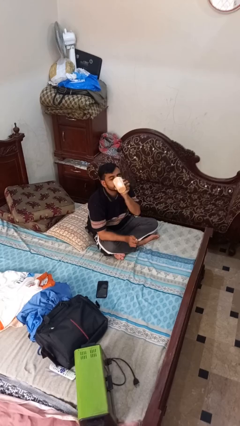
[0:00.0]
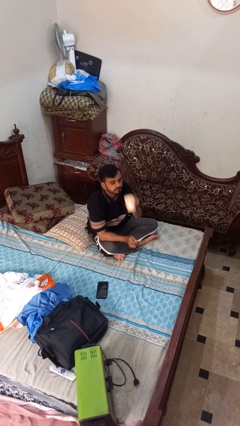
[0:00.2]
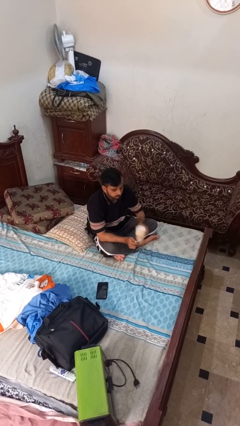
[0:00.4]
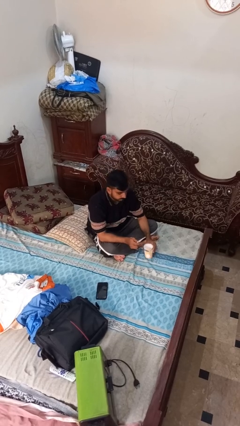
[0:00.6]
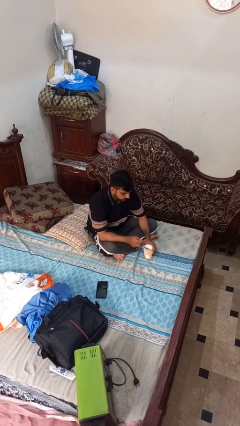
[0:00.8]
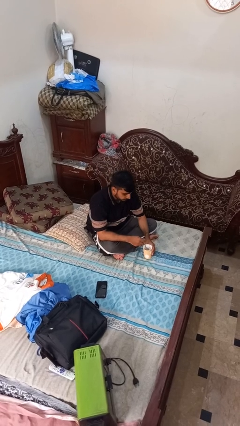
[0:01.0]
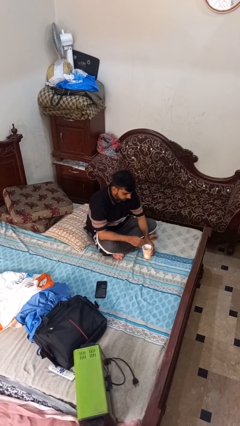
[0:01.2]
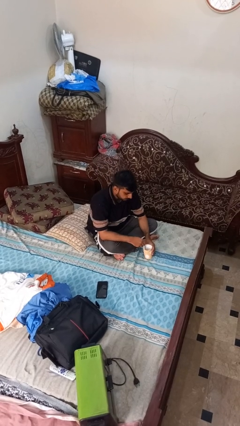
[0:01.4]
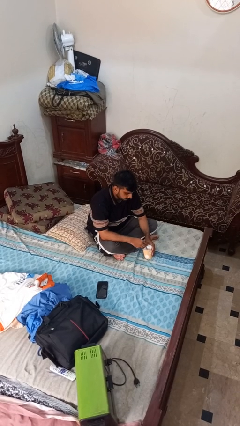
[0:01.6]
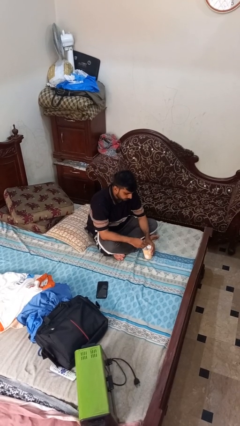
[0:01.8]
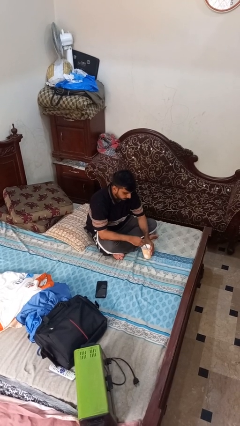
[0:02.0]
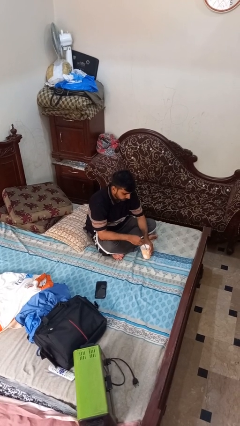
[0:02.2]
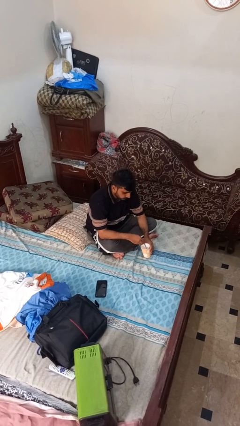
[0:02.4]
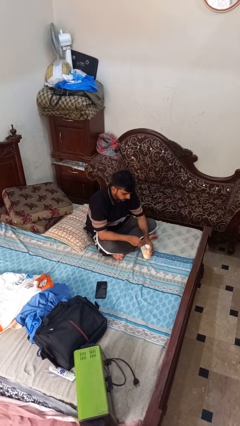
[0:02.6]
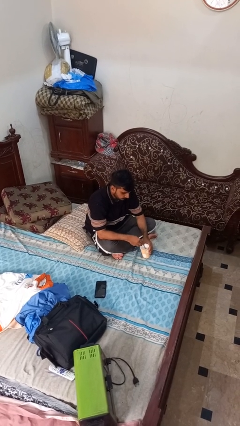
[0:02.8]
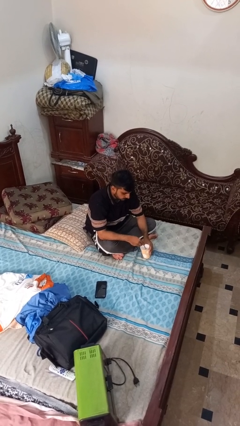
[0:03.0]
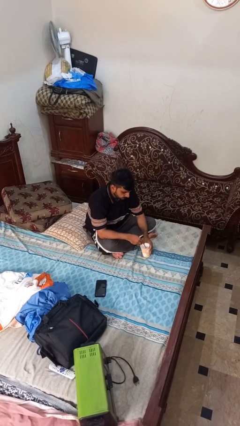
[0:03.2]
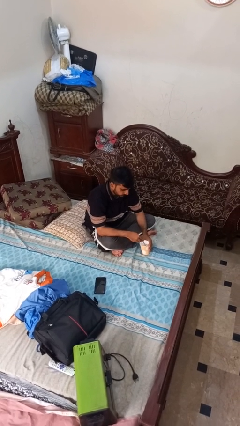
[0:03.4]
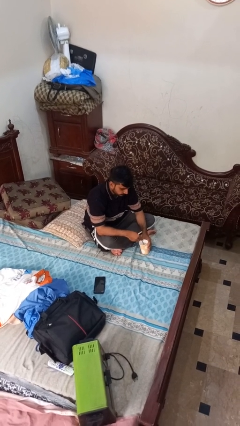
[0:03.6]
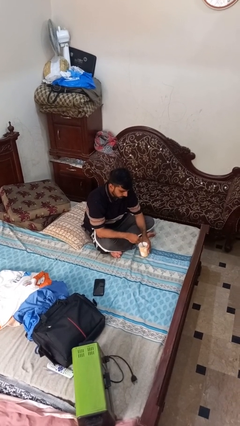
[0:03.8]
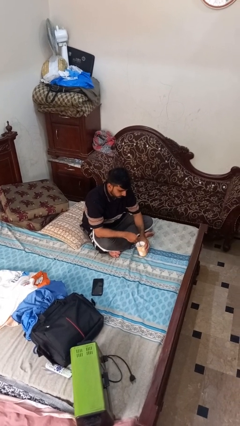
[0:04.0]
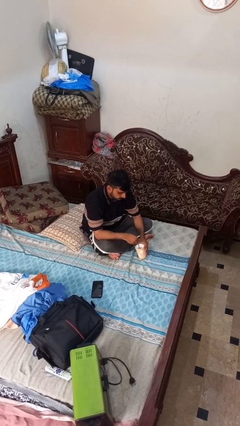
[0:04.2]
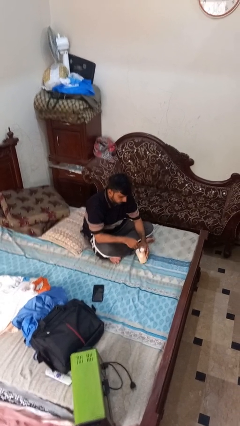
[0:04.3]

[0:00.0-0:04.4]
person stirs mug

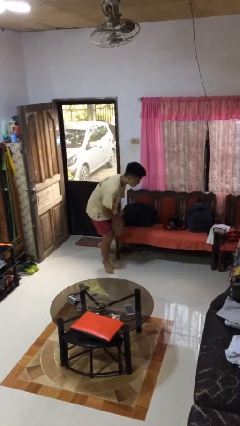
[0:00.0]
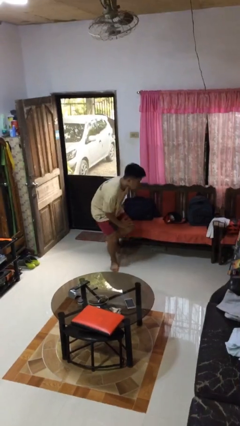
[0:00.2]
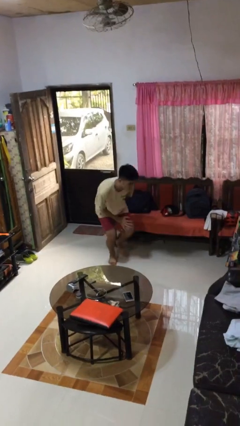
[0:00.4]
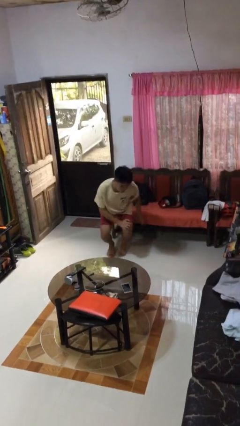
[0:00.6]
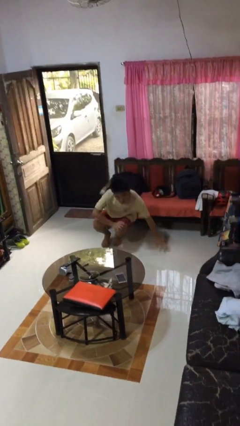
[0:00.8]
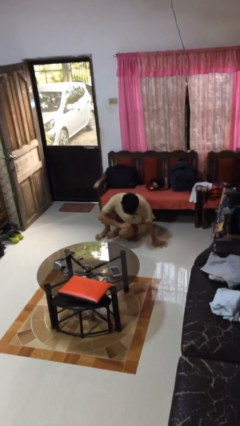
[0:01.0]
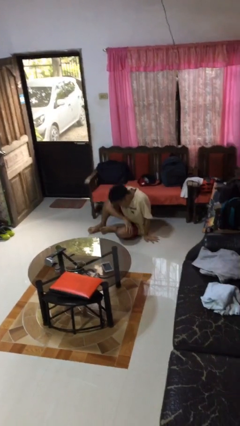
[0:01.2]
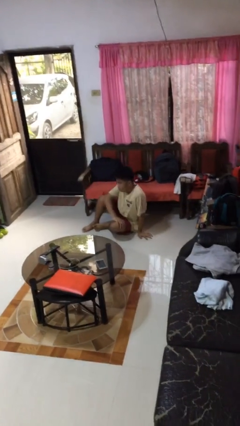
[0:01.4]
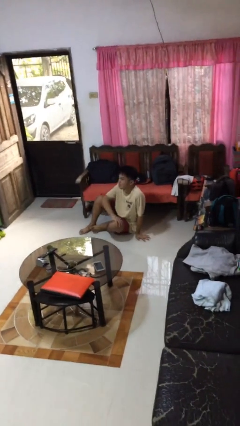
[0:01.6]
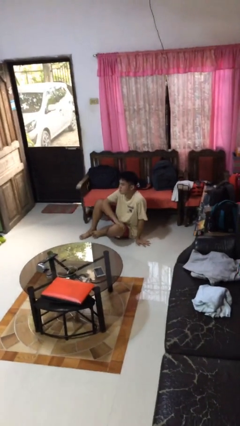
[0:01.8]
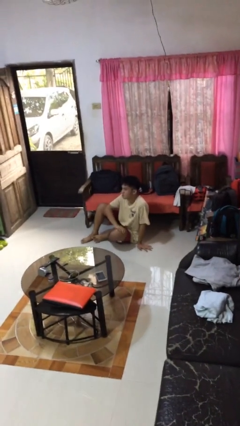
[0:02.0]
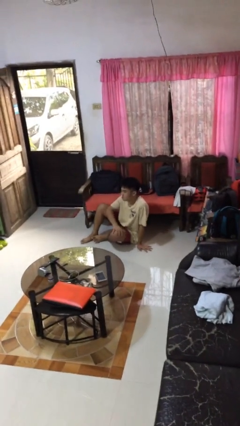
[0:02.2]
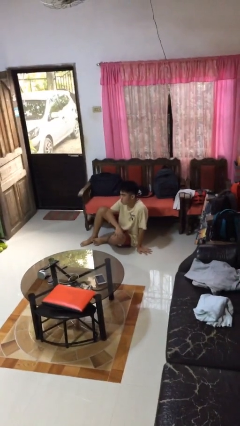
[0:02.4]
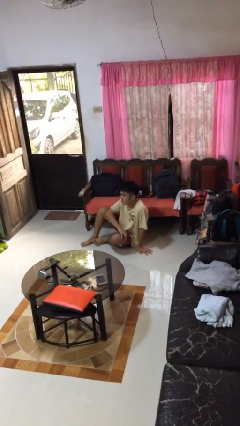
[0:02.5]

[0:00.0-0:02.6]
person lies down on floor

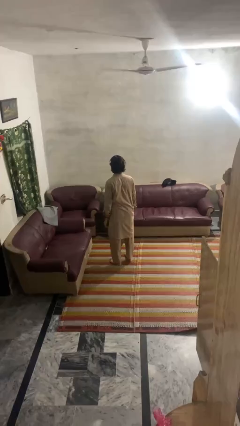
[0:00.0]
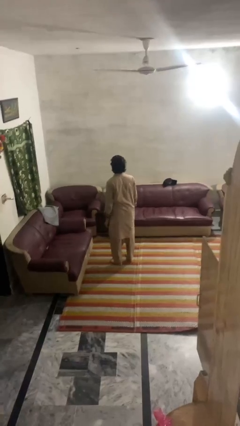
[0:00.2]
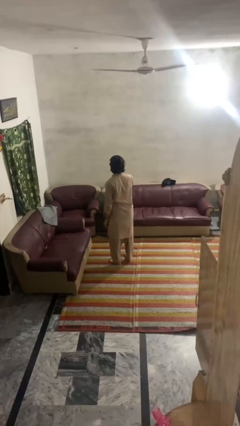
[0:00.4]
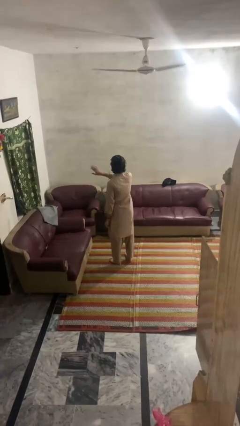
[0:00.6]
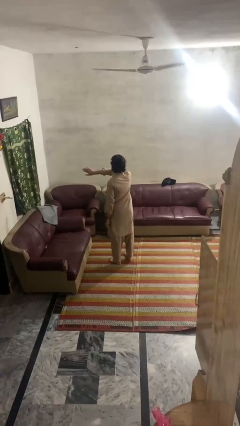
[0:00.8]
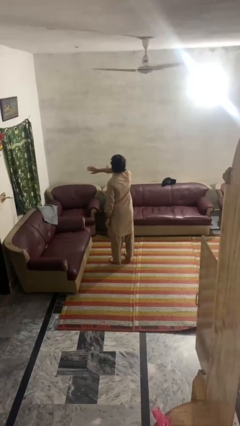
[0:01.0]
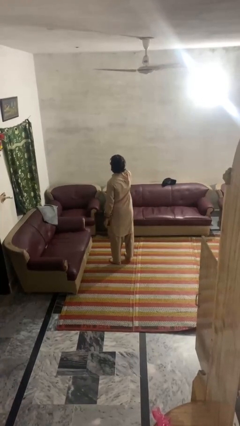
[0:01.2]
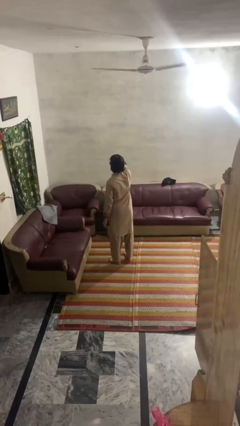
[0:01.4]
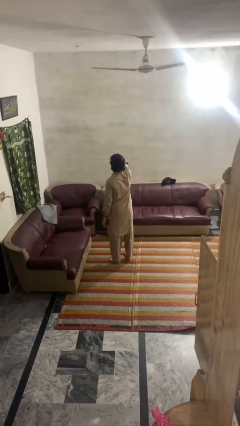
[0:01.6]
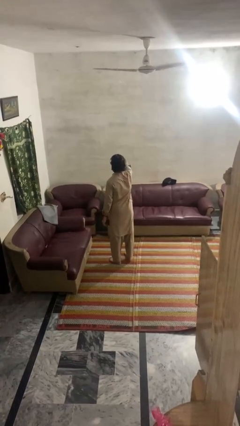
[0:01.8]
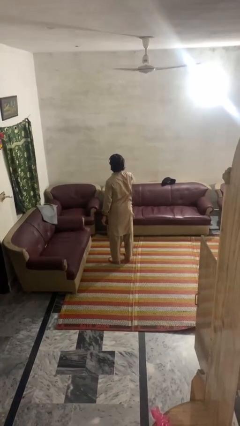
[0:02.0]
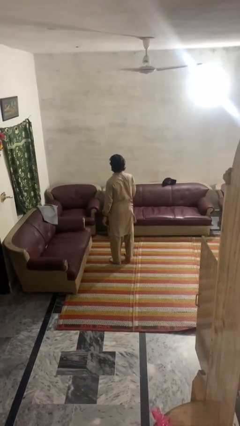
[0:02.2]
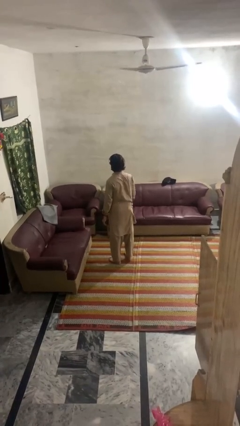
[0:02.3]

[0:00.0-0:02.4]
person gestures swipe right

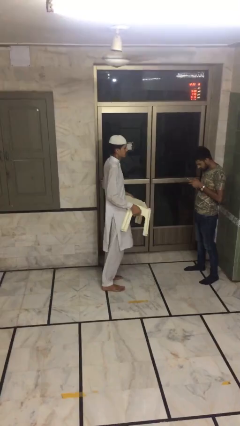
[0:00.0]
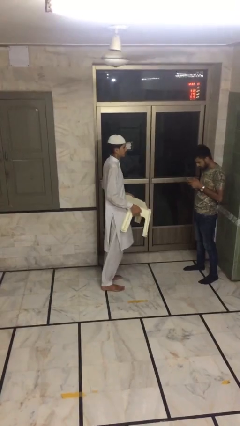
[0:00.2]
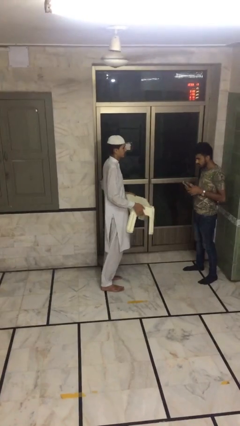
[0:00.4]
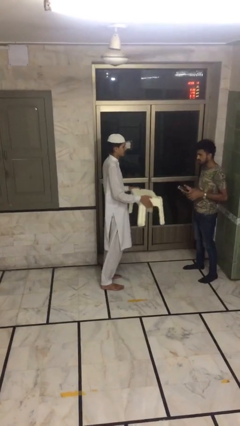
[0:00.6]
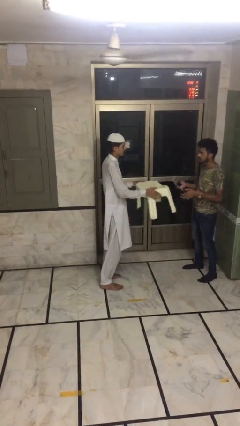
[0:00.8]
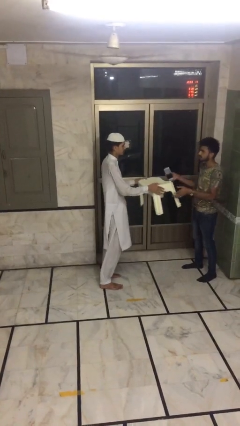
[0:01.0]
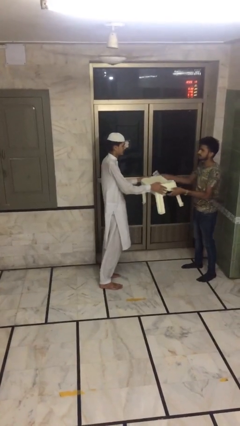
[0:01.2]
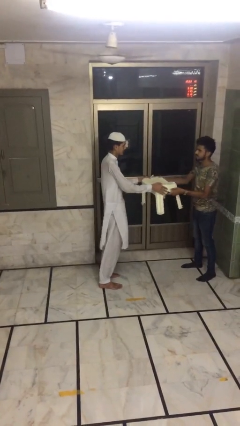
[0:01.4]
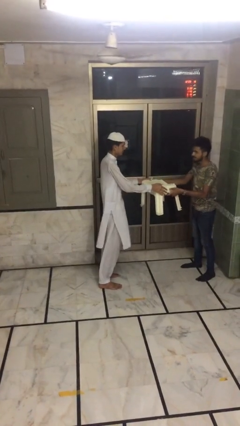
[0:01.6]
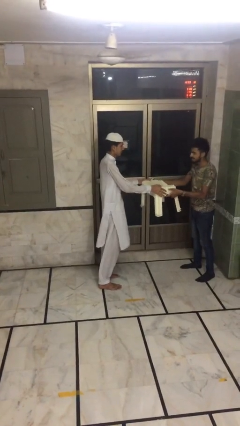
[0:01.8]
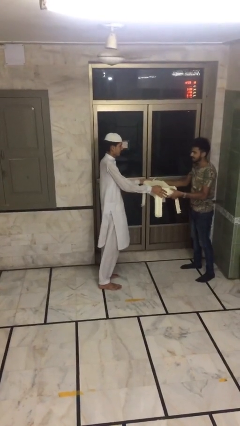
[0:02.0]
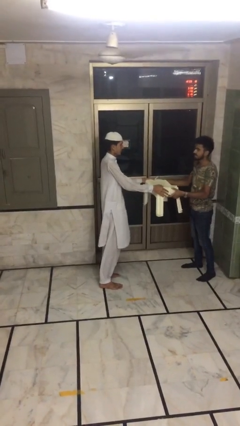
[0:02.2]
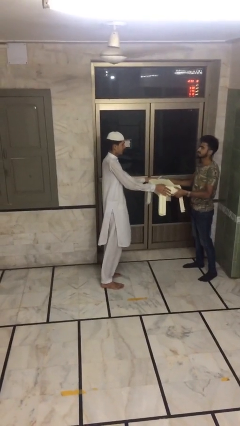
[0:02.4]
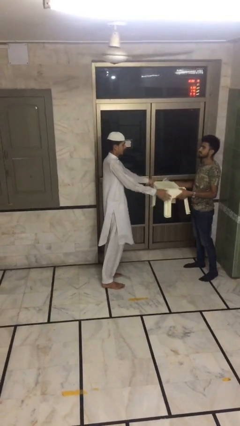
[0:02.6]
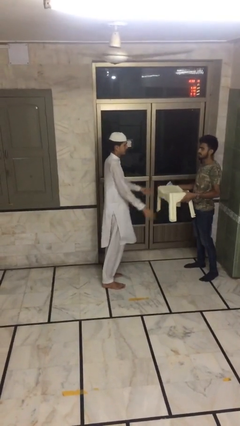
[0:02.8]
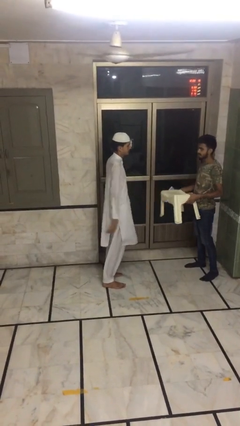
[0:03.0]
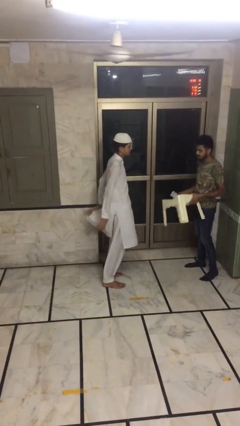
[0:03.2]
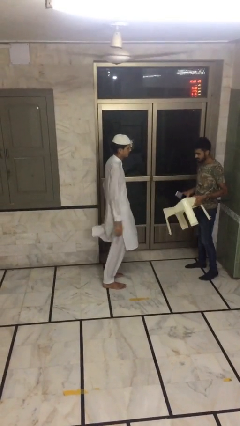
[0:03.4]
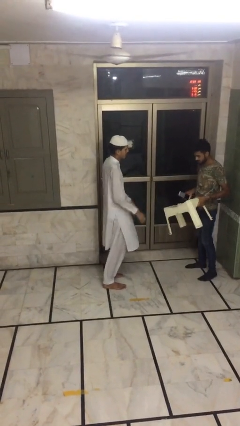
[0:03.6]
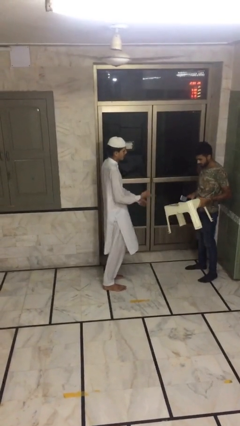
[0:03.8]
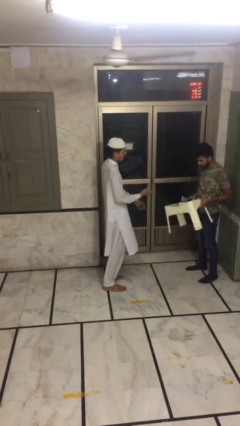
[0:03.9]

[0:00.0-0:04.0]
person transfers object to person

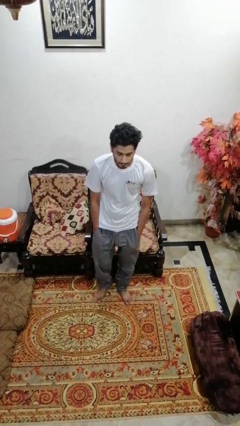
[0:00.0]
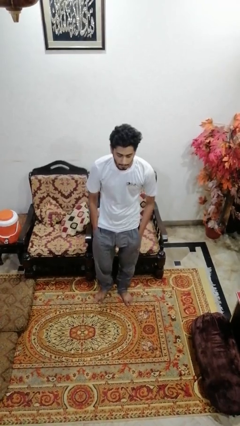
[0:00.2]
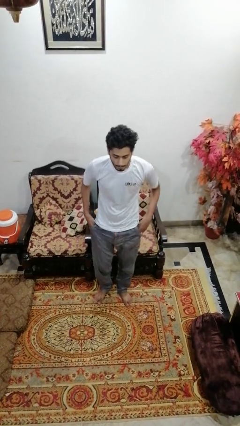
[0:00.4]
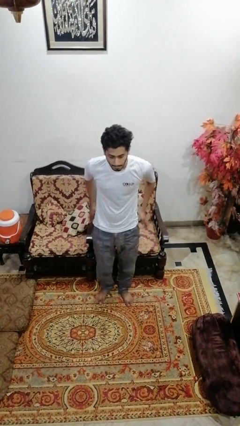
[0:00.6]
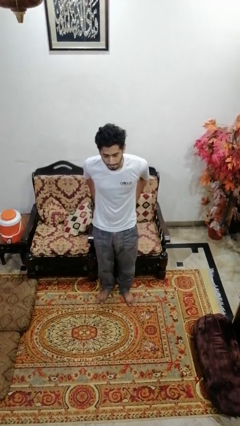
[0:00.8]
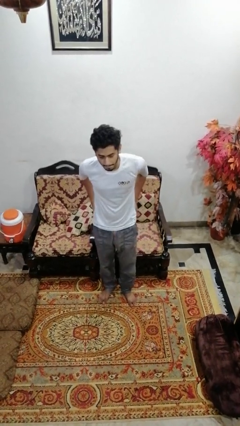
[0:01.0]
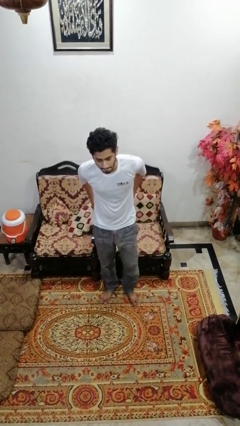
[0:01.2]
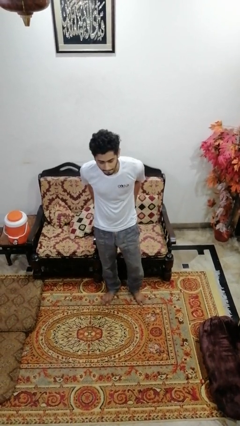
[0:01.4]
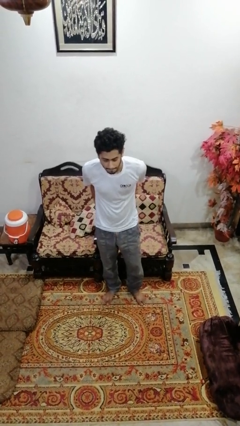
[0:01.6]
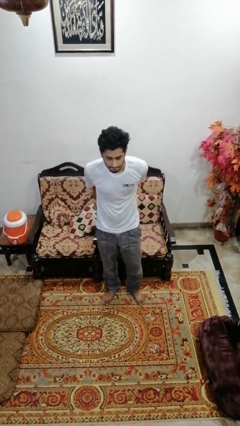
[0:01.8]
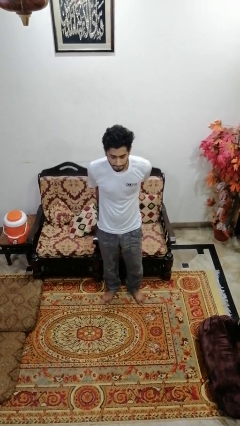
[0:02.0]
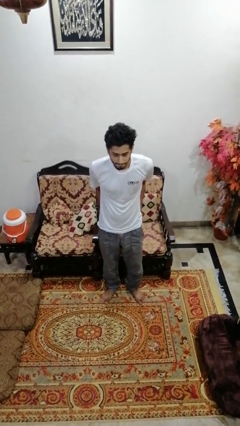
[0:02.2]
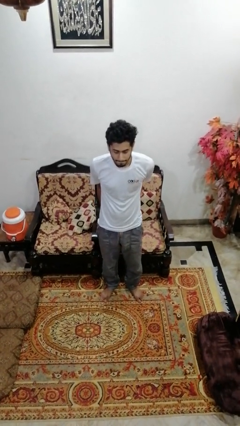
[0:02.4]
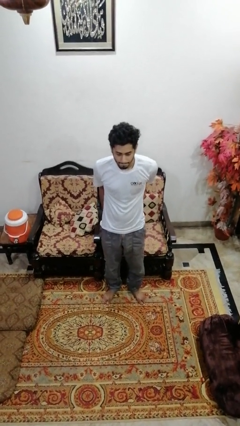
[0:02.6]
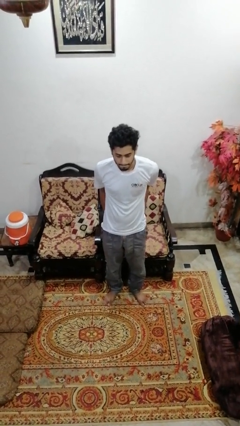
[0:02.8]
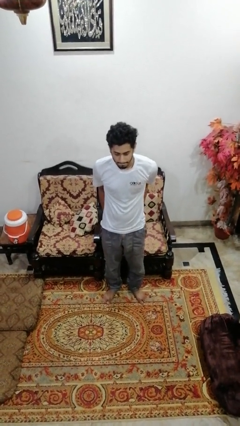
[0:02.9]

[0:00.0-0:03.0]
person puts hands in back pockets

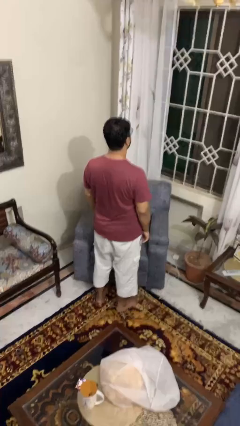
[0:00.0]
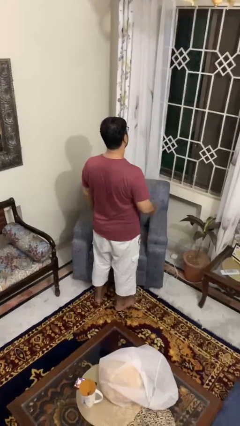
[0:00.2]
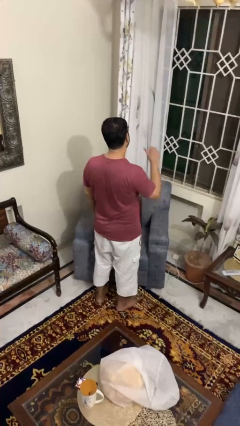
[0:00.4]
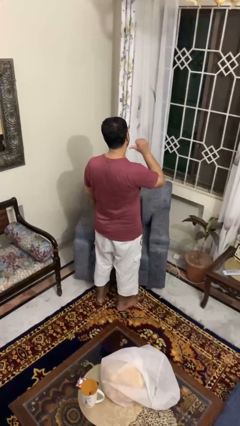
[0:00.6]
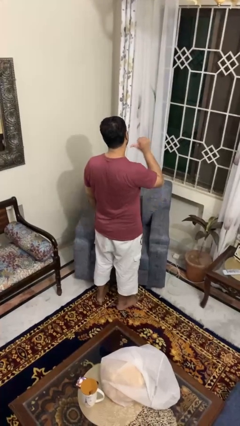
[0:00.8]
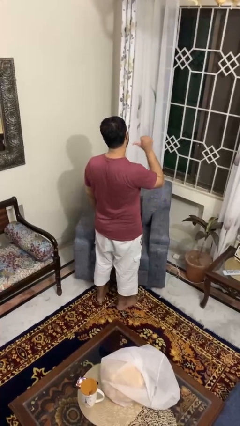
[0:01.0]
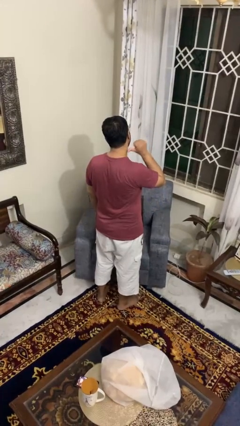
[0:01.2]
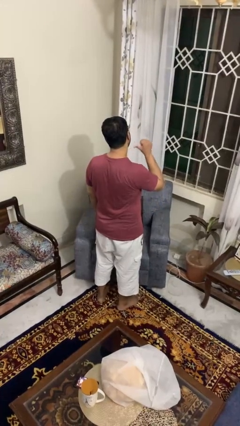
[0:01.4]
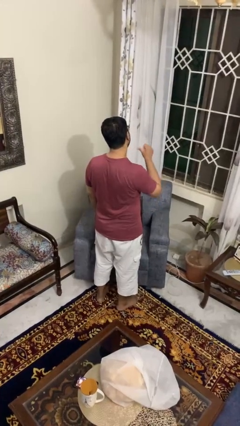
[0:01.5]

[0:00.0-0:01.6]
person gestures behind me
